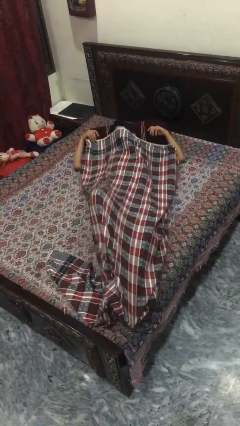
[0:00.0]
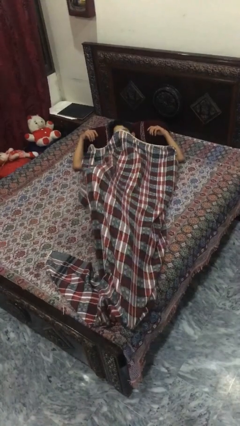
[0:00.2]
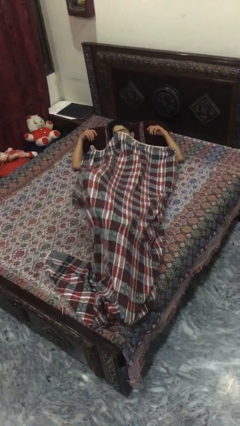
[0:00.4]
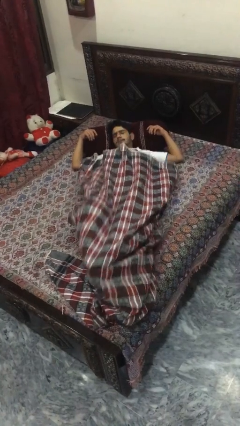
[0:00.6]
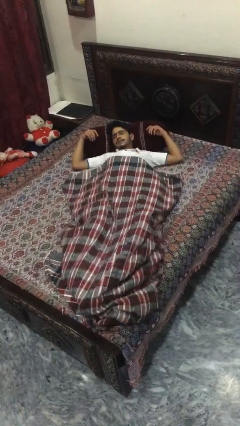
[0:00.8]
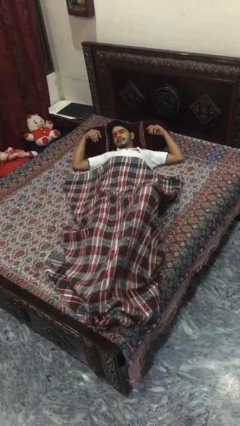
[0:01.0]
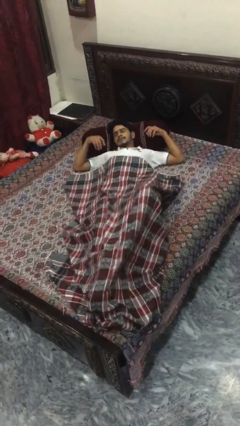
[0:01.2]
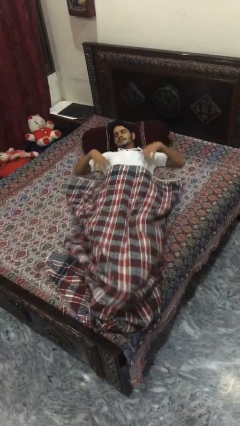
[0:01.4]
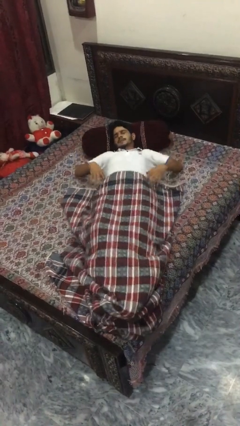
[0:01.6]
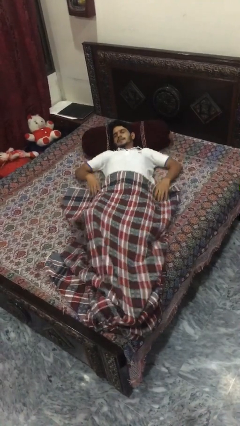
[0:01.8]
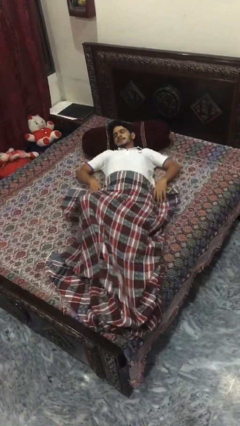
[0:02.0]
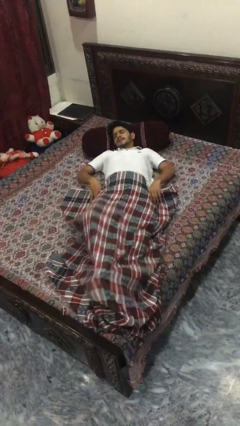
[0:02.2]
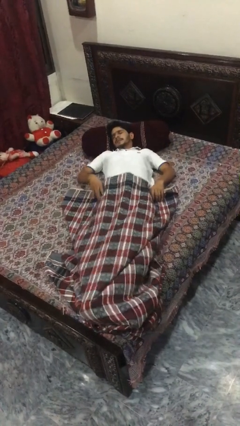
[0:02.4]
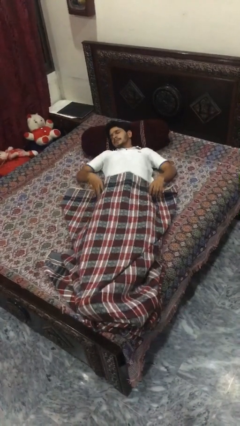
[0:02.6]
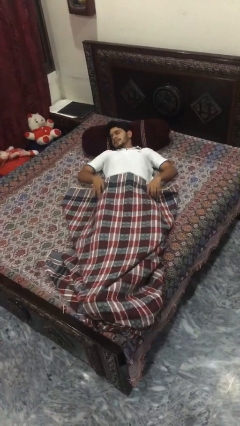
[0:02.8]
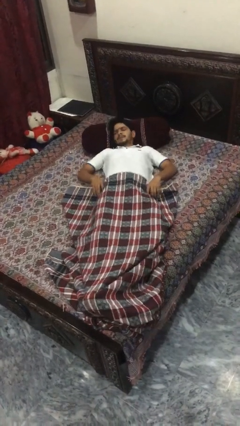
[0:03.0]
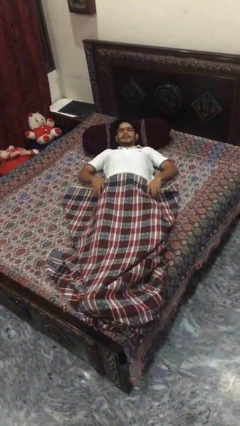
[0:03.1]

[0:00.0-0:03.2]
person uncovers with bedsheets

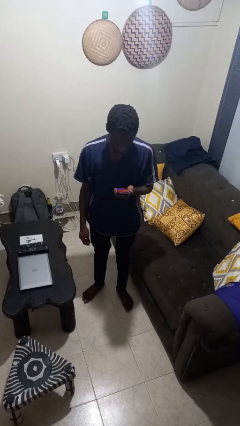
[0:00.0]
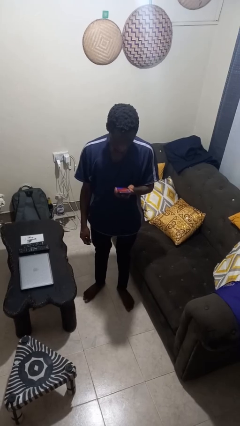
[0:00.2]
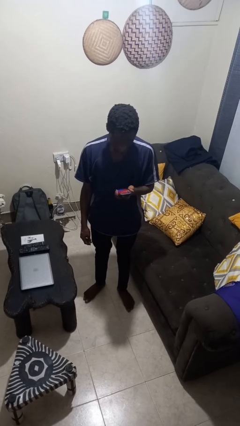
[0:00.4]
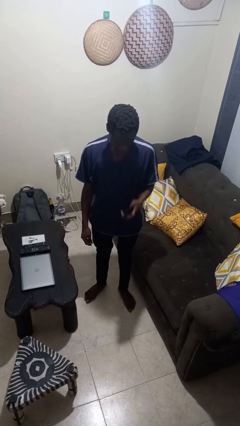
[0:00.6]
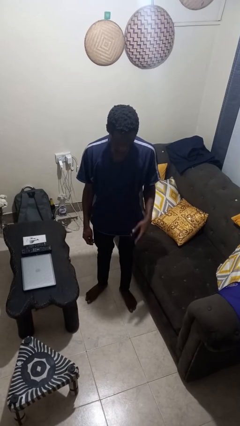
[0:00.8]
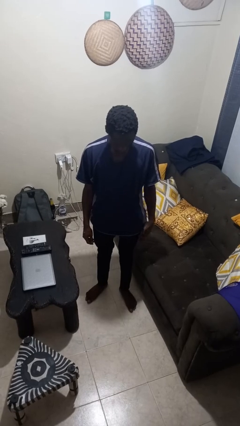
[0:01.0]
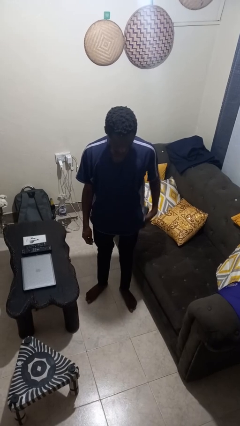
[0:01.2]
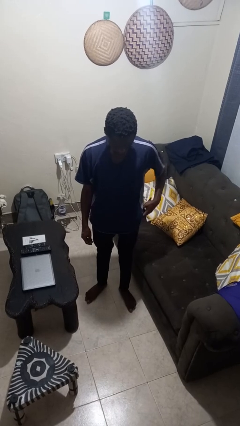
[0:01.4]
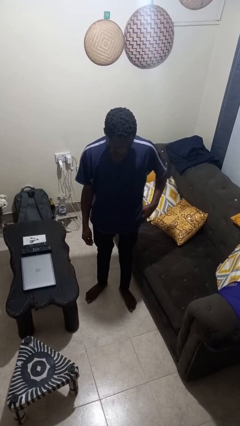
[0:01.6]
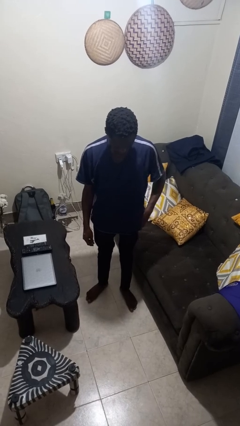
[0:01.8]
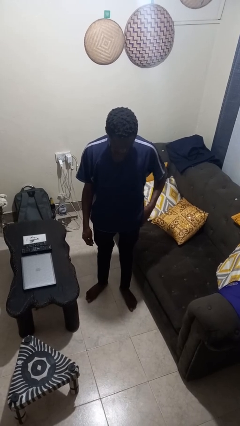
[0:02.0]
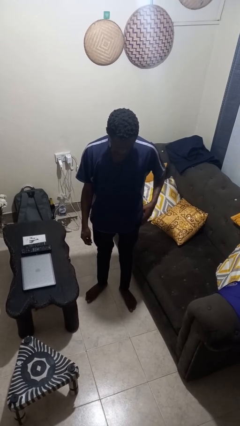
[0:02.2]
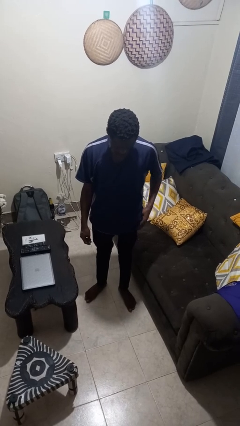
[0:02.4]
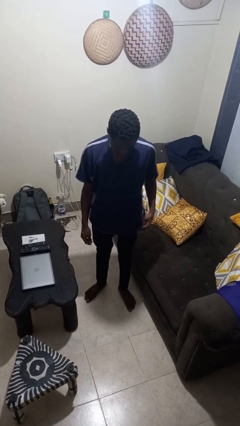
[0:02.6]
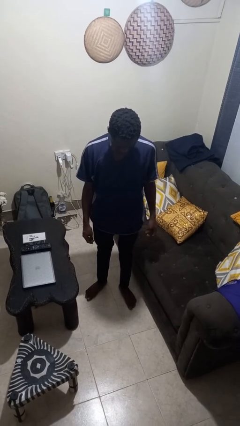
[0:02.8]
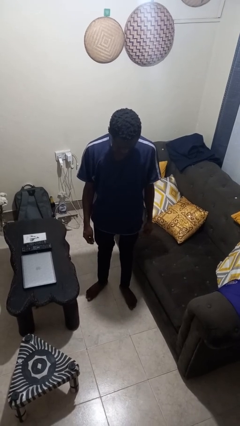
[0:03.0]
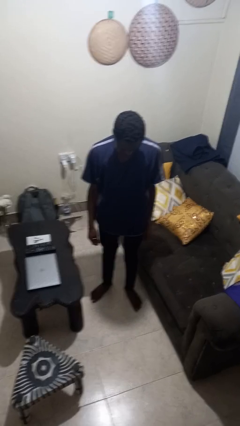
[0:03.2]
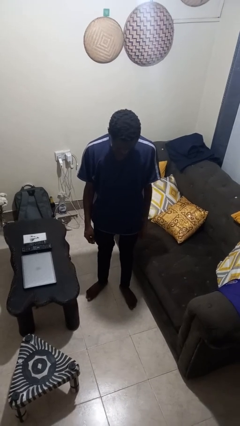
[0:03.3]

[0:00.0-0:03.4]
person puts phone into pocket

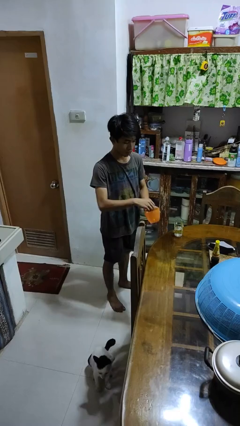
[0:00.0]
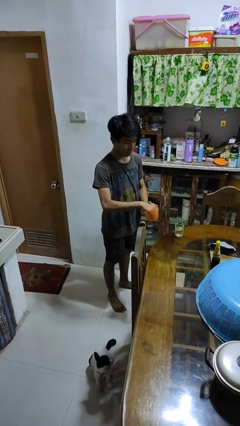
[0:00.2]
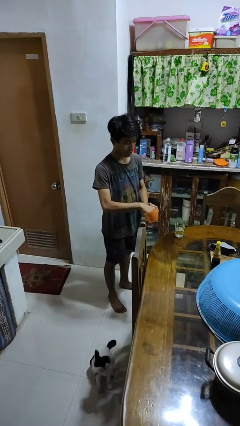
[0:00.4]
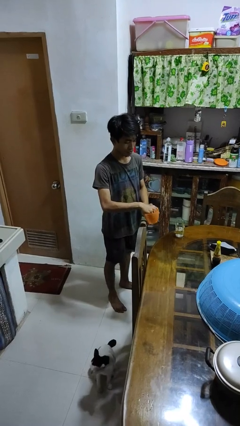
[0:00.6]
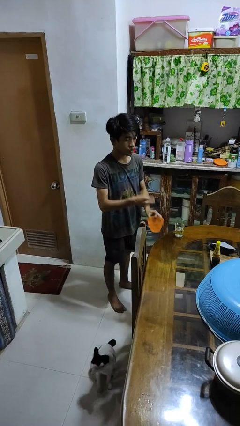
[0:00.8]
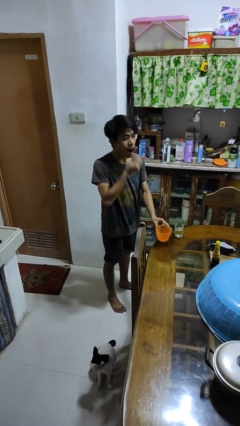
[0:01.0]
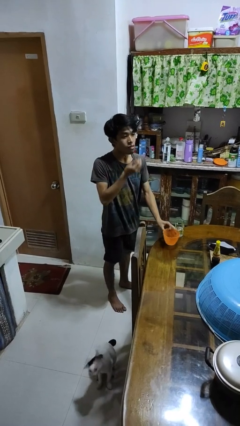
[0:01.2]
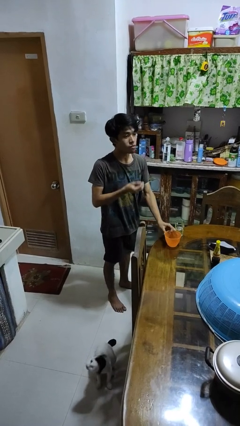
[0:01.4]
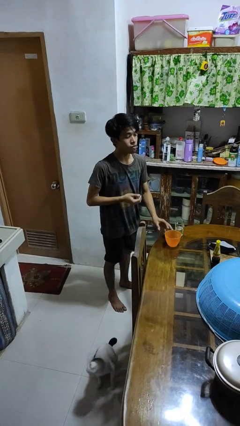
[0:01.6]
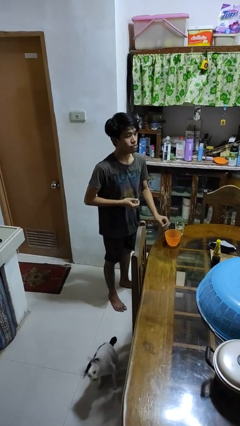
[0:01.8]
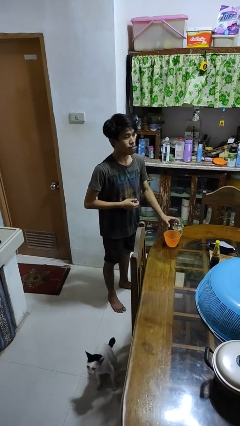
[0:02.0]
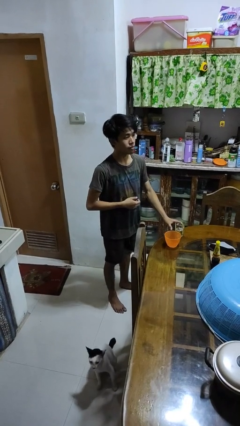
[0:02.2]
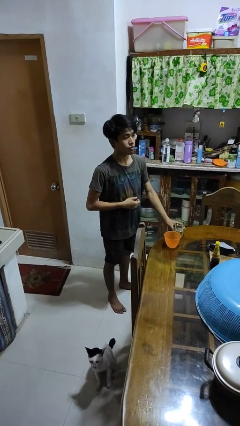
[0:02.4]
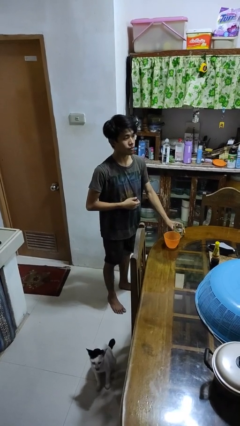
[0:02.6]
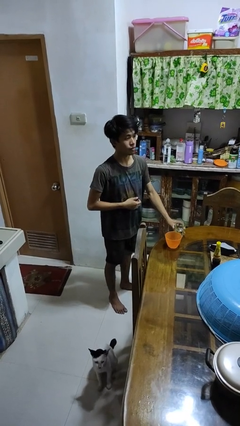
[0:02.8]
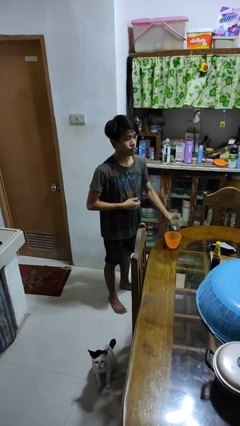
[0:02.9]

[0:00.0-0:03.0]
person takes medicine pills

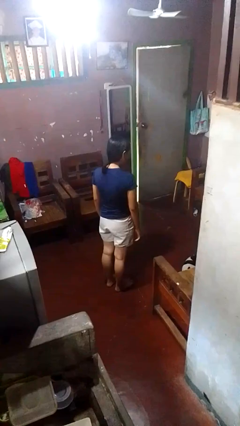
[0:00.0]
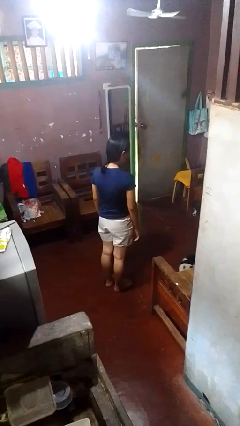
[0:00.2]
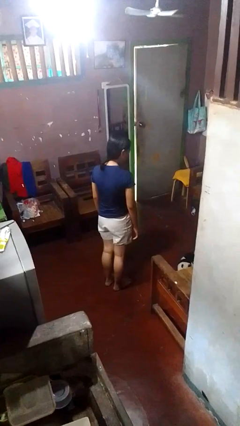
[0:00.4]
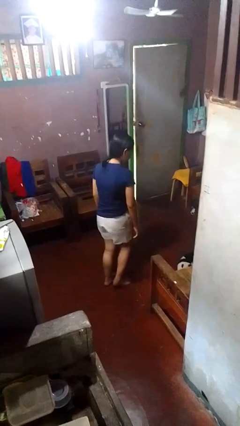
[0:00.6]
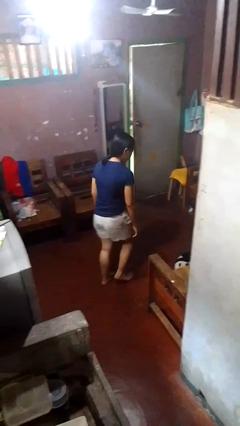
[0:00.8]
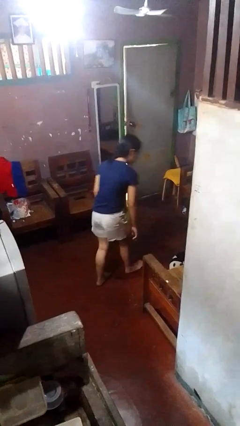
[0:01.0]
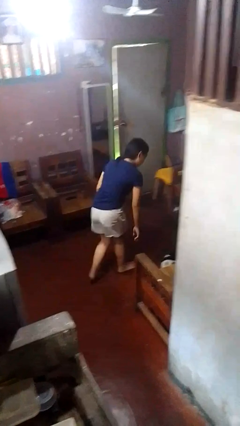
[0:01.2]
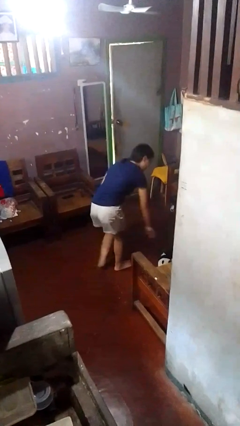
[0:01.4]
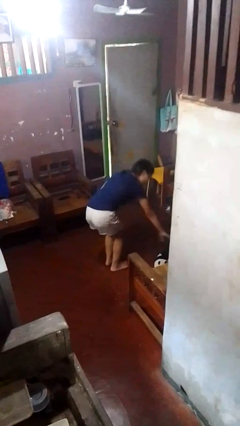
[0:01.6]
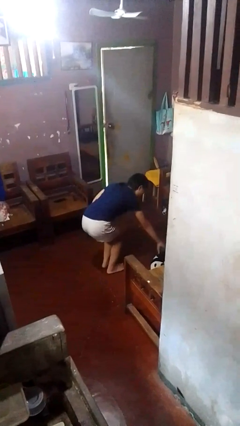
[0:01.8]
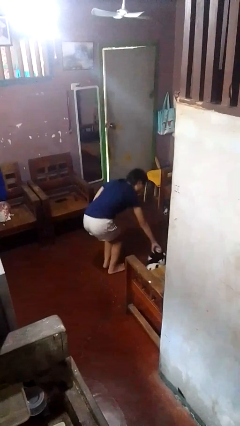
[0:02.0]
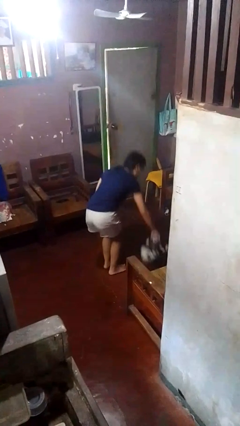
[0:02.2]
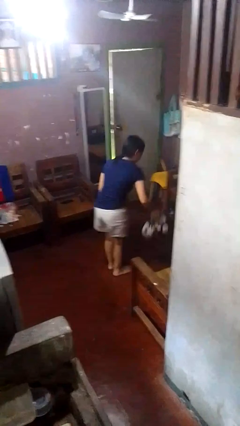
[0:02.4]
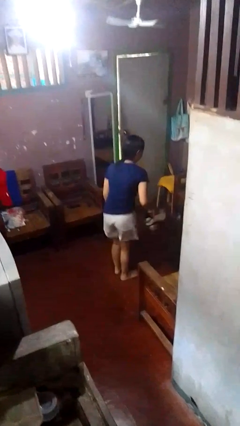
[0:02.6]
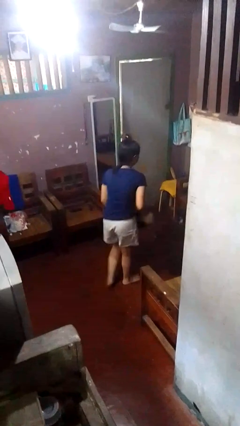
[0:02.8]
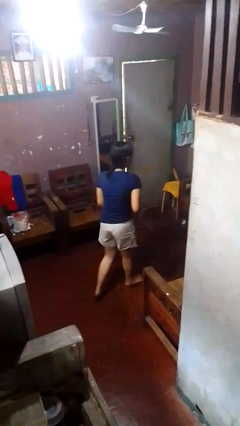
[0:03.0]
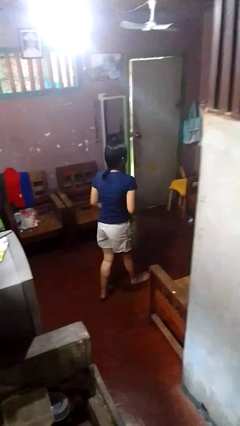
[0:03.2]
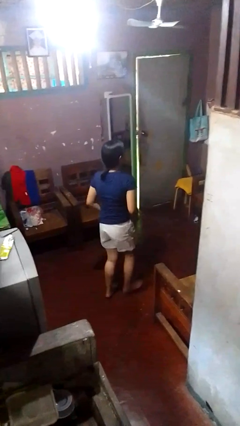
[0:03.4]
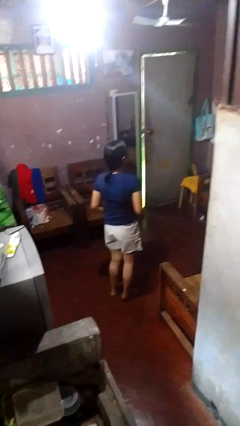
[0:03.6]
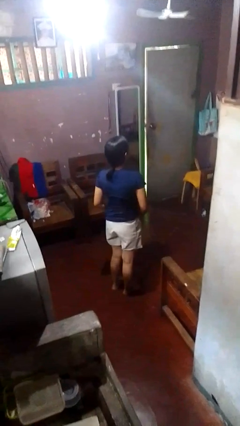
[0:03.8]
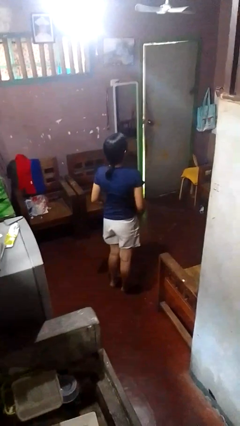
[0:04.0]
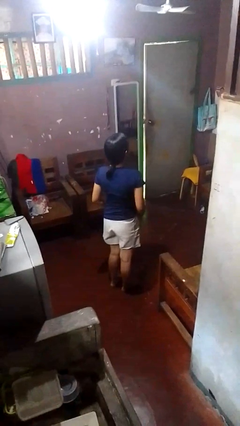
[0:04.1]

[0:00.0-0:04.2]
person picks up object from floor

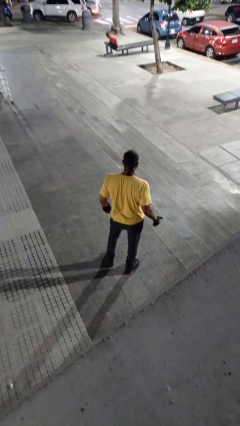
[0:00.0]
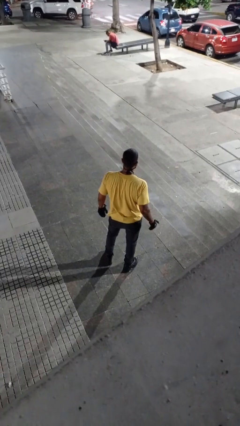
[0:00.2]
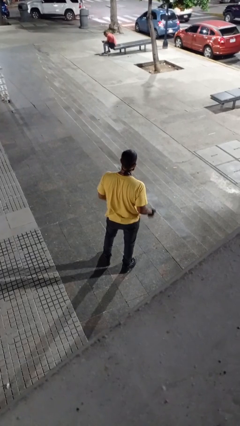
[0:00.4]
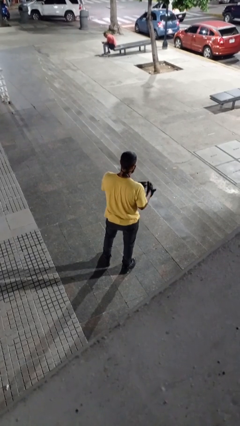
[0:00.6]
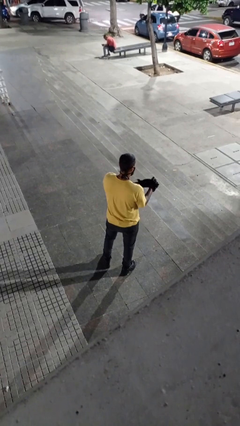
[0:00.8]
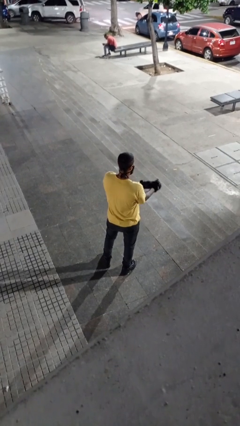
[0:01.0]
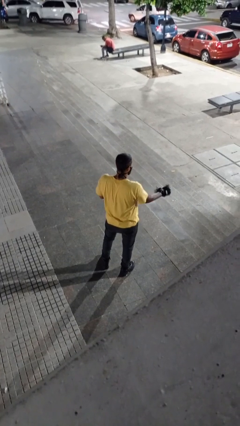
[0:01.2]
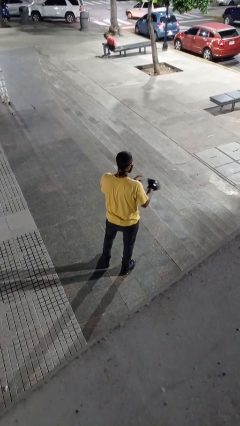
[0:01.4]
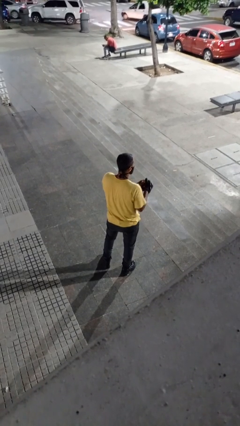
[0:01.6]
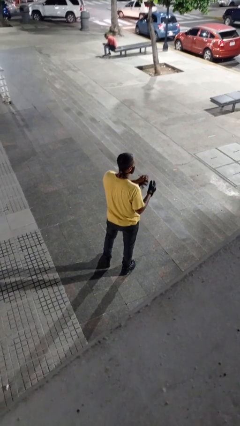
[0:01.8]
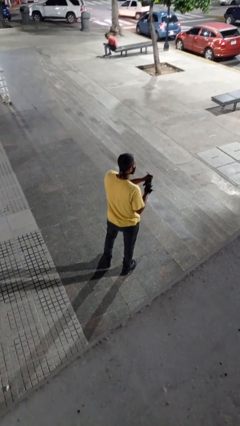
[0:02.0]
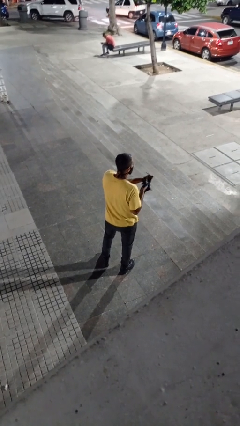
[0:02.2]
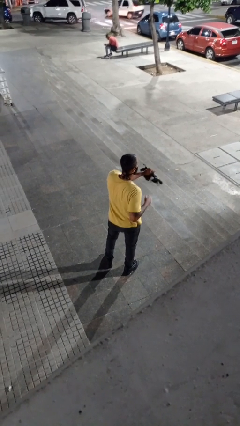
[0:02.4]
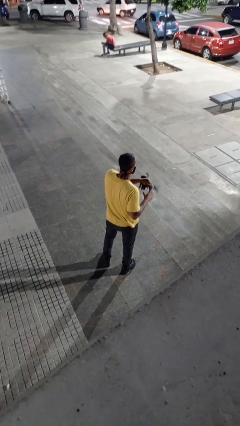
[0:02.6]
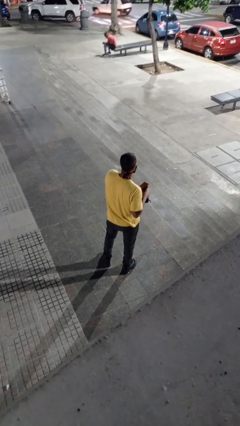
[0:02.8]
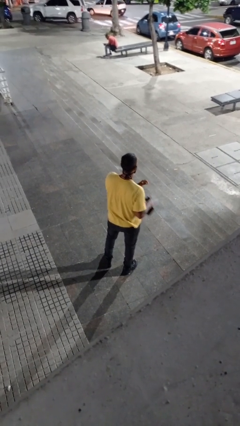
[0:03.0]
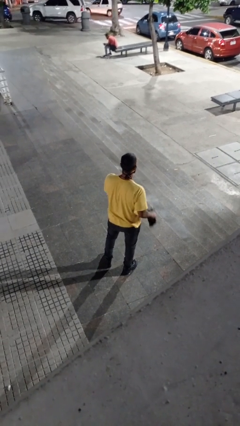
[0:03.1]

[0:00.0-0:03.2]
person takes off gloves
